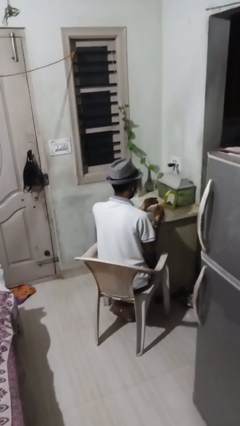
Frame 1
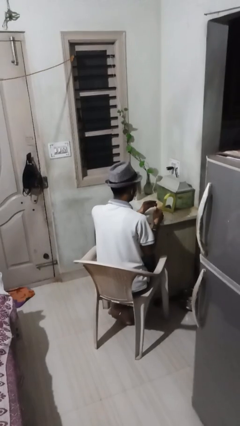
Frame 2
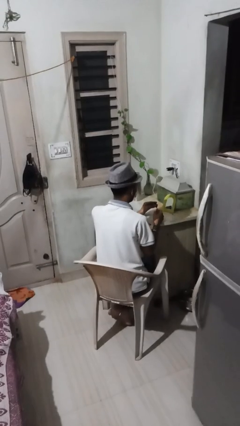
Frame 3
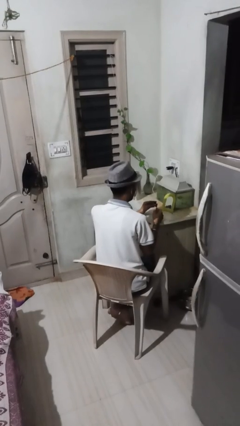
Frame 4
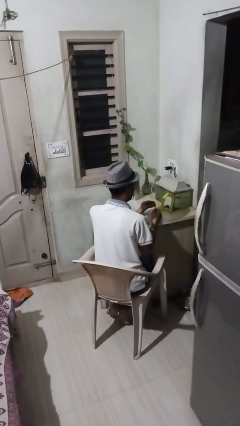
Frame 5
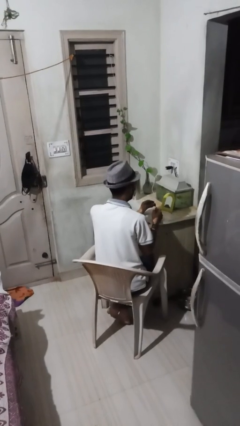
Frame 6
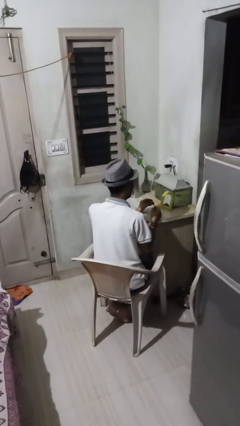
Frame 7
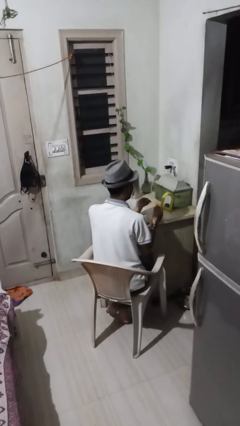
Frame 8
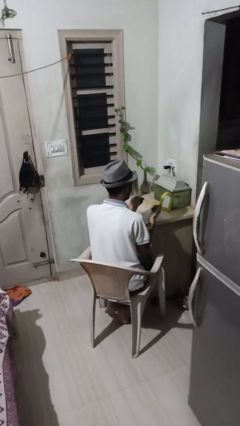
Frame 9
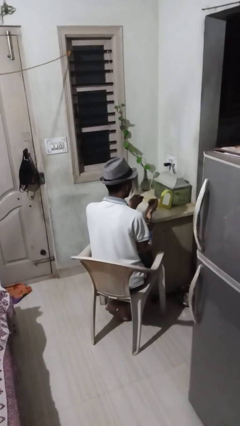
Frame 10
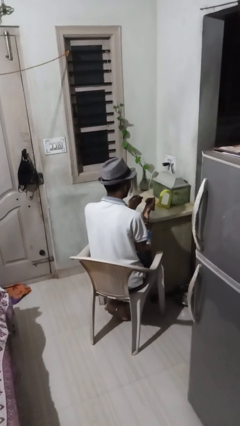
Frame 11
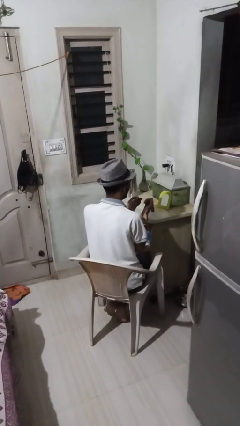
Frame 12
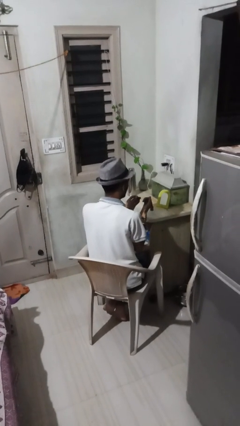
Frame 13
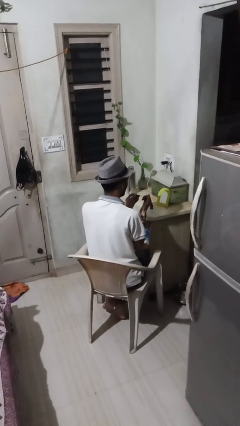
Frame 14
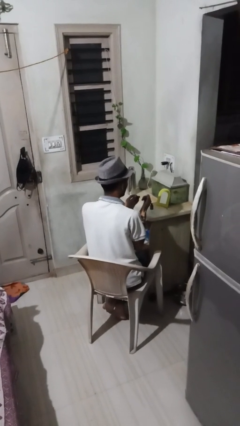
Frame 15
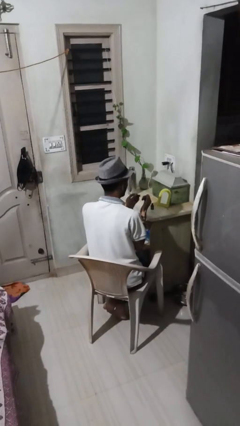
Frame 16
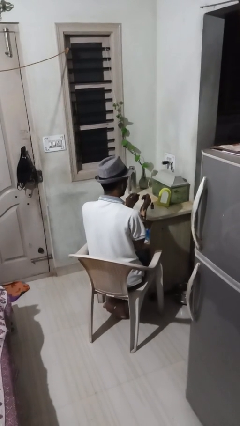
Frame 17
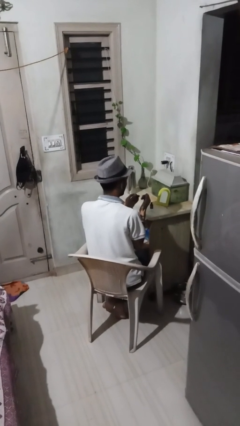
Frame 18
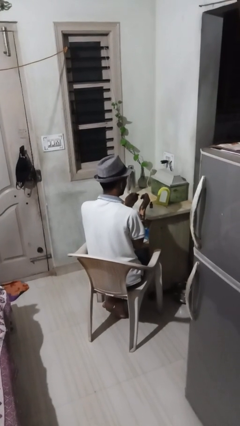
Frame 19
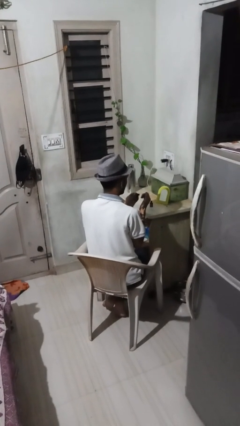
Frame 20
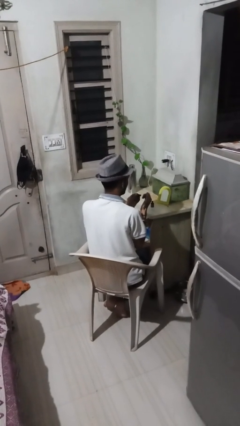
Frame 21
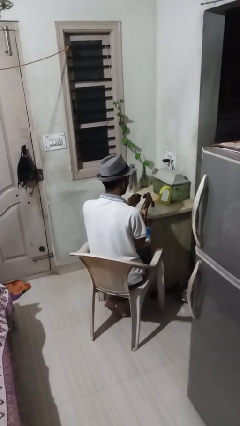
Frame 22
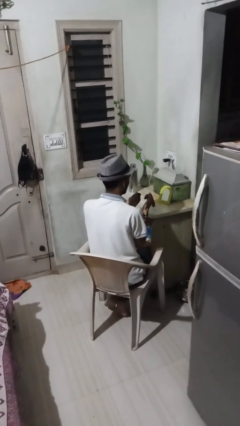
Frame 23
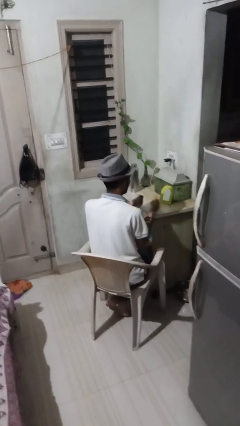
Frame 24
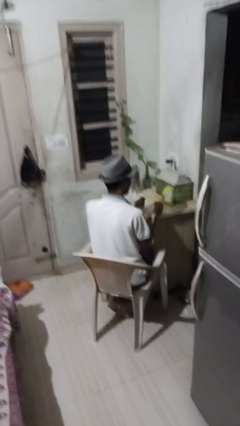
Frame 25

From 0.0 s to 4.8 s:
person paints fingernails

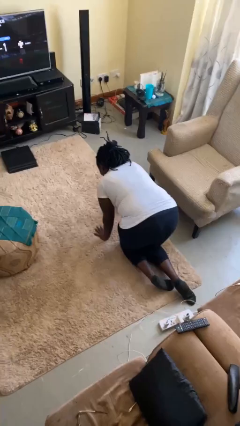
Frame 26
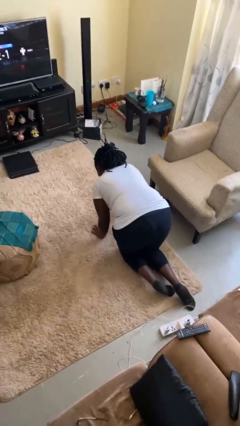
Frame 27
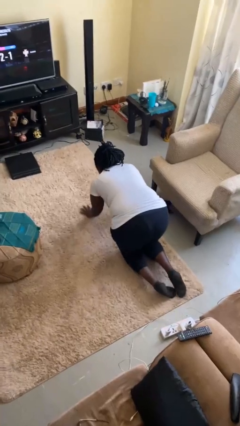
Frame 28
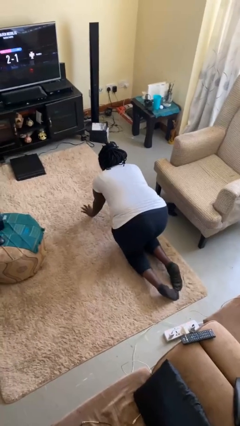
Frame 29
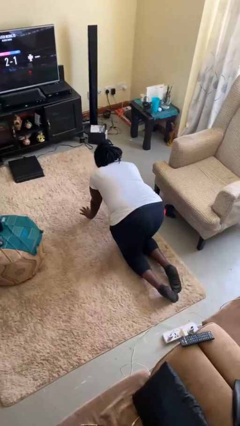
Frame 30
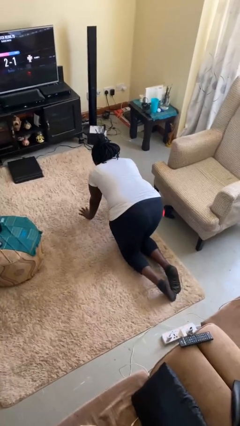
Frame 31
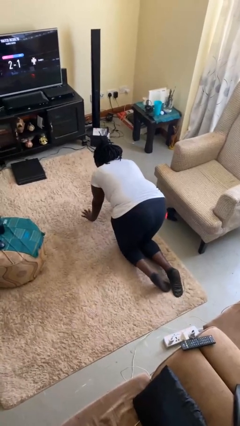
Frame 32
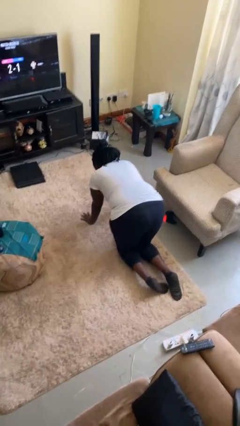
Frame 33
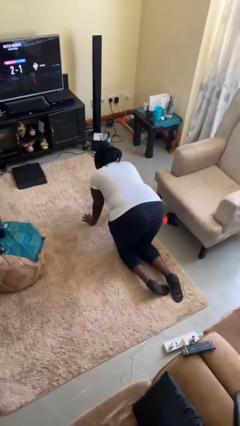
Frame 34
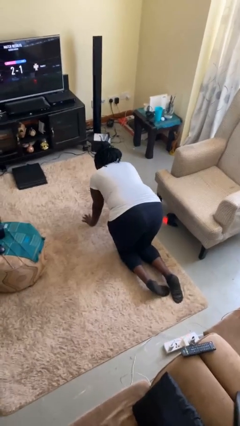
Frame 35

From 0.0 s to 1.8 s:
person crawls

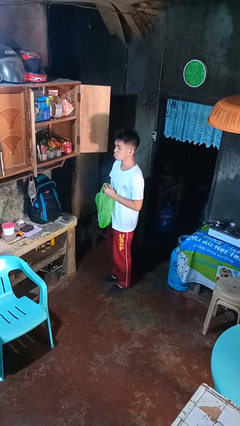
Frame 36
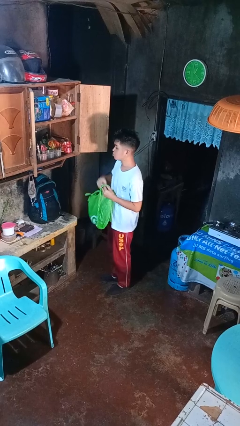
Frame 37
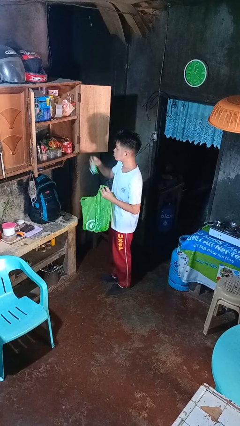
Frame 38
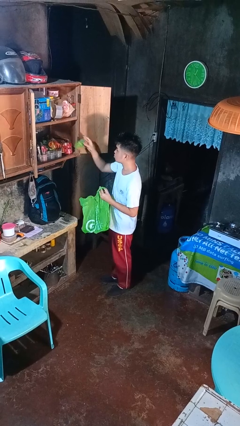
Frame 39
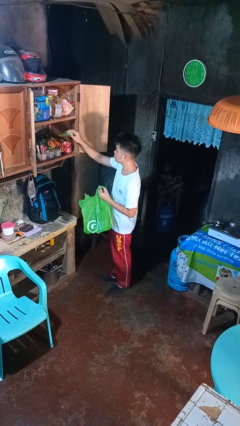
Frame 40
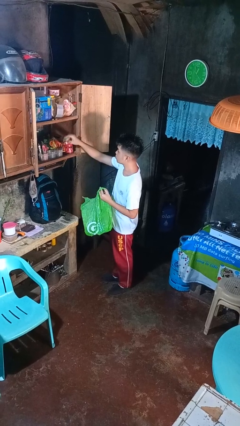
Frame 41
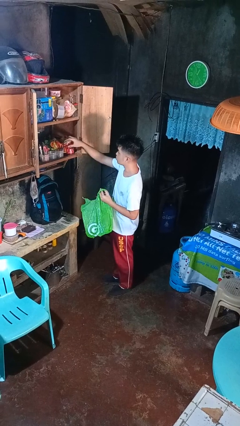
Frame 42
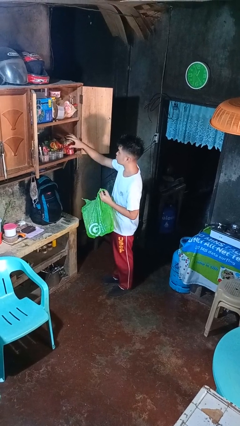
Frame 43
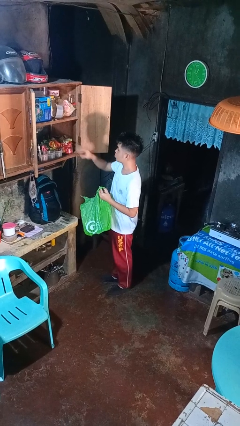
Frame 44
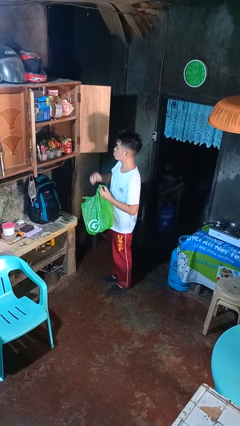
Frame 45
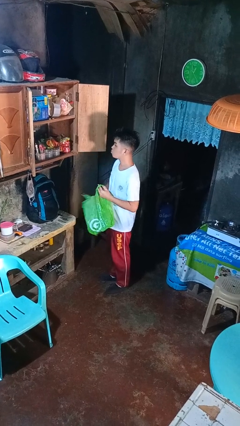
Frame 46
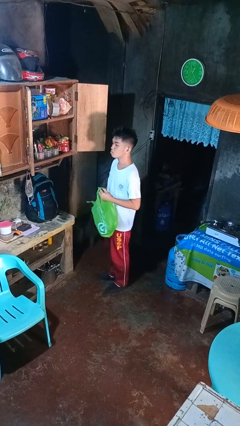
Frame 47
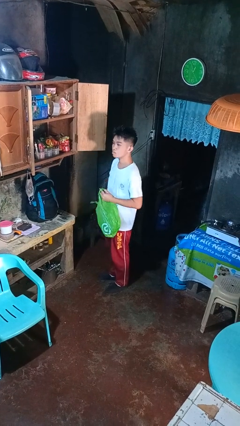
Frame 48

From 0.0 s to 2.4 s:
person loads groceries into cabinet

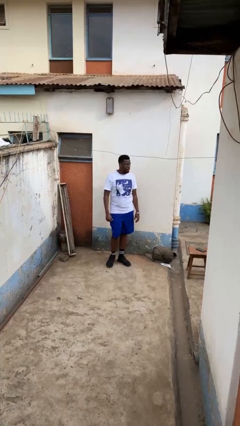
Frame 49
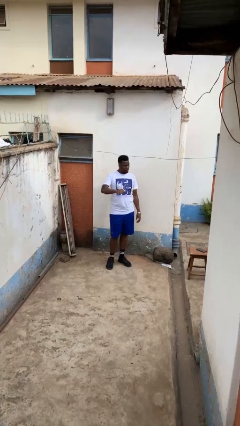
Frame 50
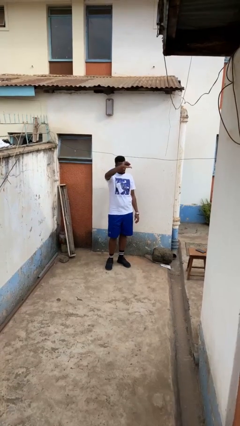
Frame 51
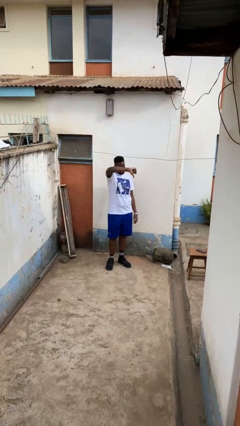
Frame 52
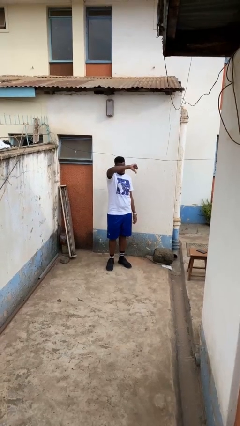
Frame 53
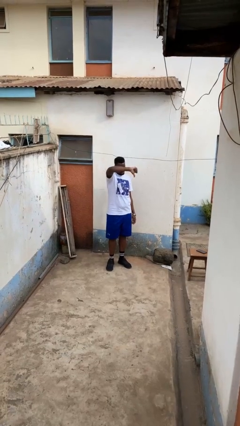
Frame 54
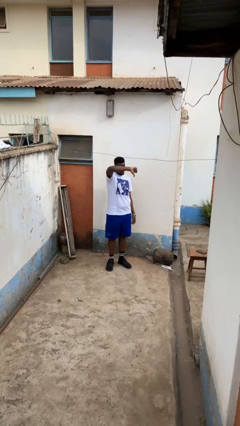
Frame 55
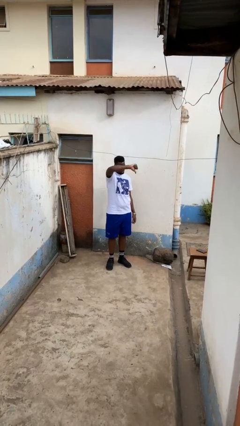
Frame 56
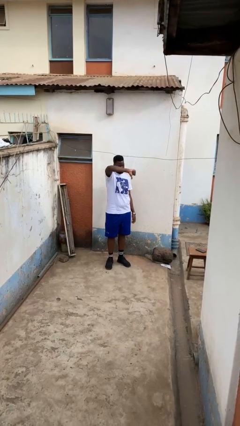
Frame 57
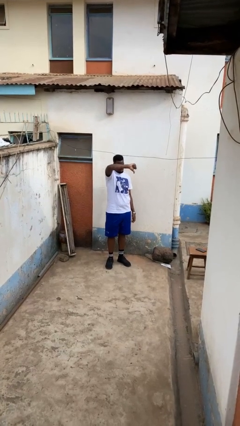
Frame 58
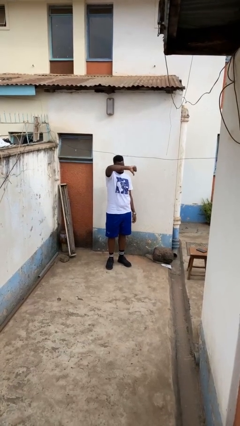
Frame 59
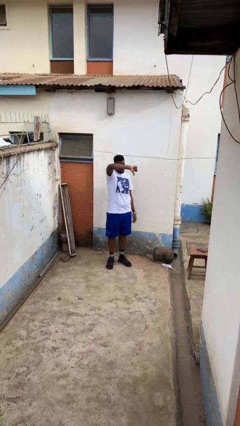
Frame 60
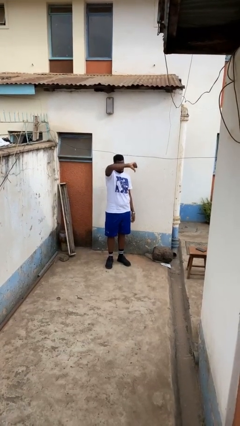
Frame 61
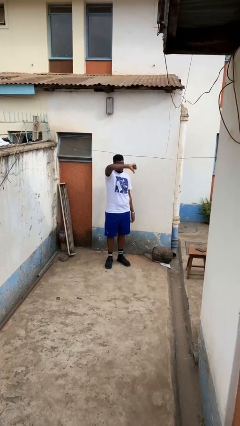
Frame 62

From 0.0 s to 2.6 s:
person gestures thumbs down

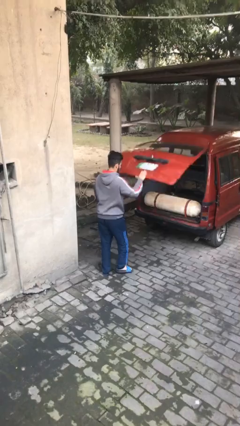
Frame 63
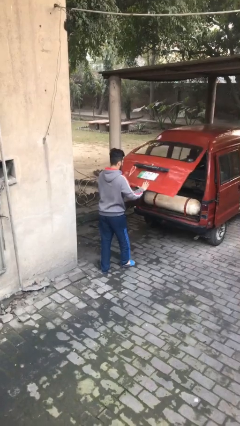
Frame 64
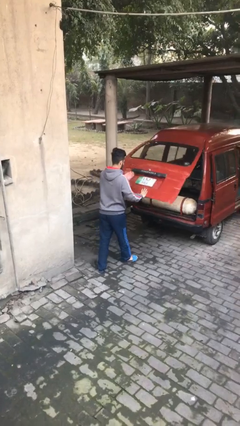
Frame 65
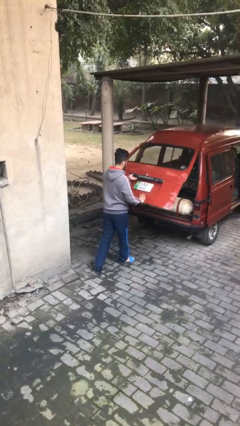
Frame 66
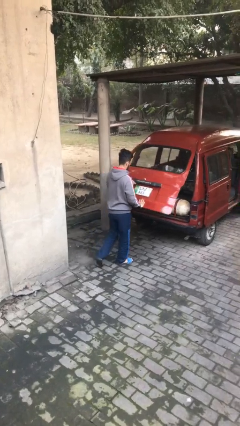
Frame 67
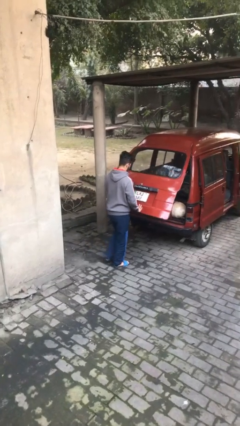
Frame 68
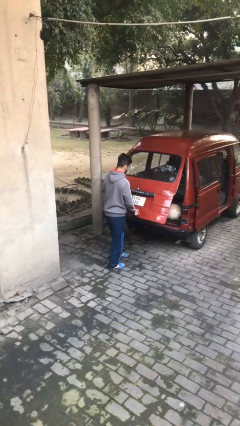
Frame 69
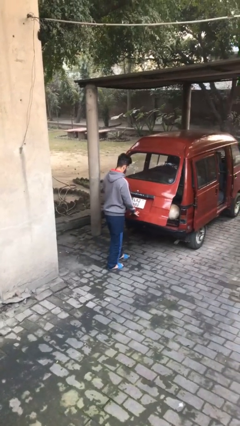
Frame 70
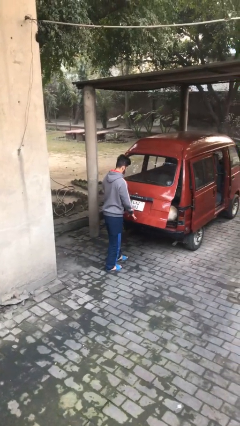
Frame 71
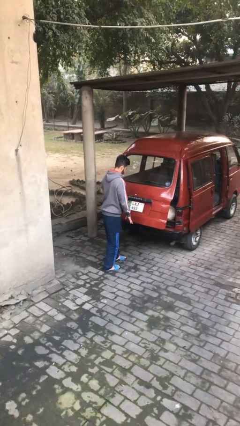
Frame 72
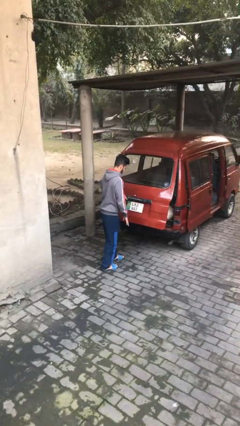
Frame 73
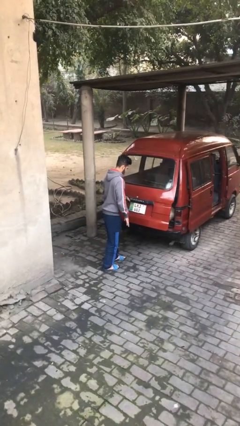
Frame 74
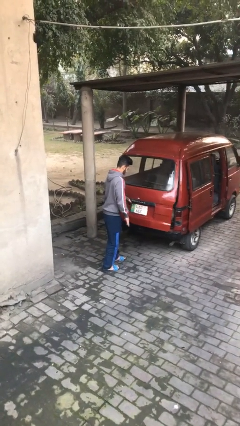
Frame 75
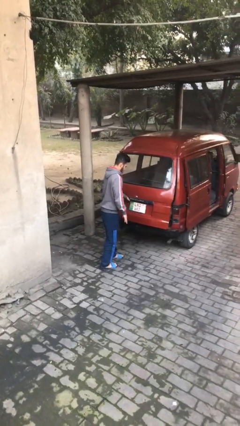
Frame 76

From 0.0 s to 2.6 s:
person closes car trunk

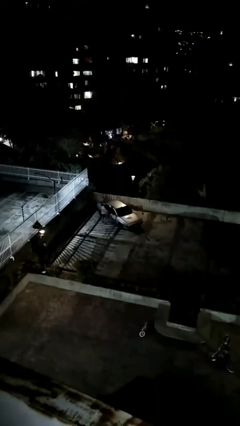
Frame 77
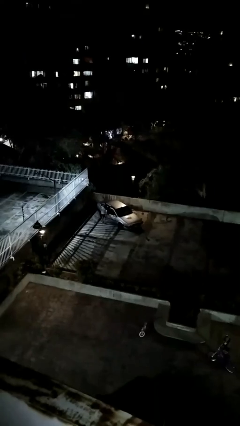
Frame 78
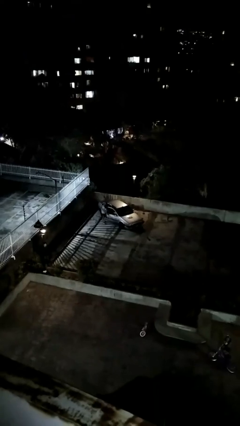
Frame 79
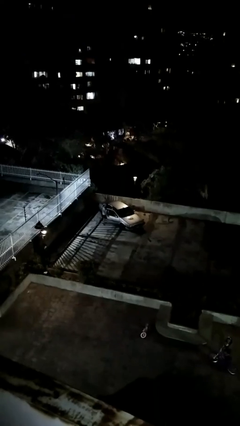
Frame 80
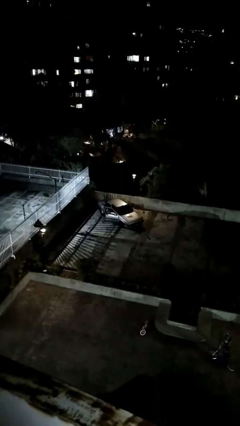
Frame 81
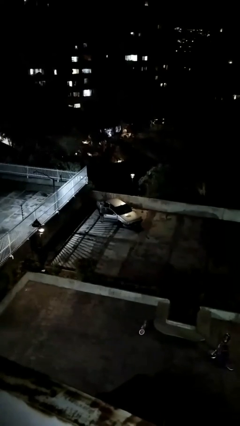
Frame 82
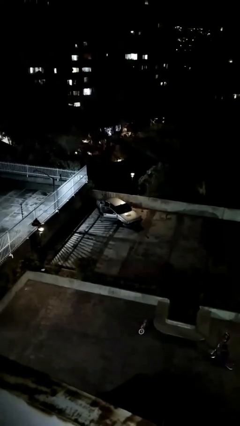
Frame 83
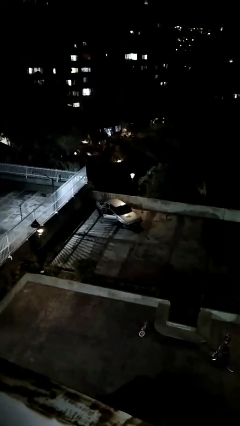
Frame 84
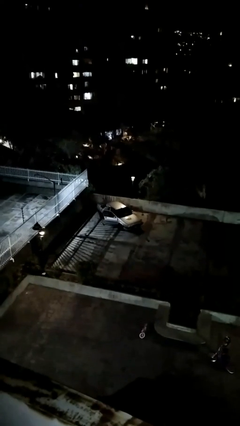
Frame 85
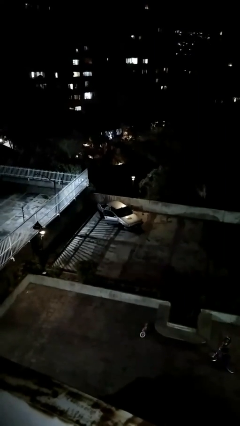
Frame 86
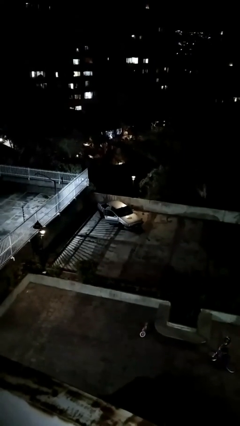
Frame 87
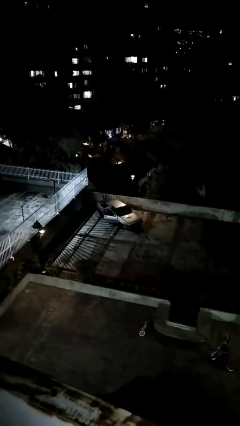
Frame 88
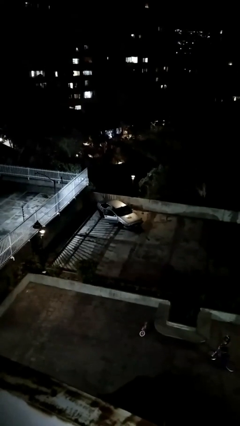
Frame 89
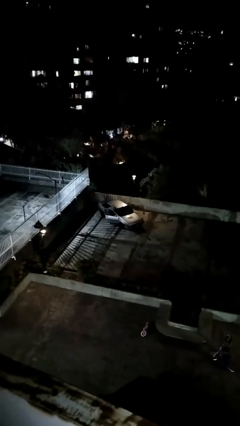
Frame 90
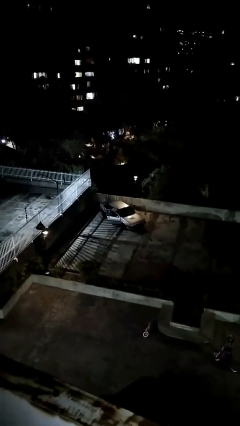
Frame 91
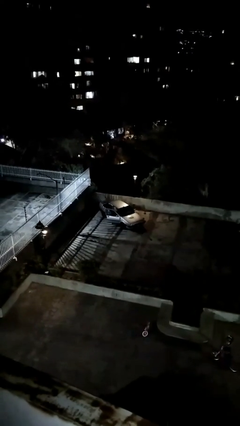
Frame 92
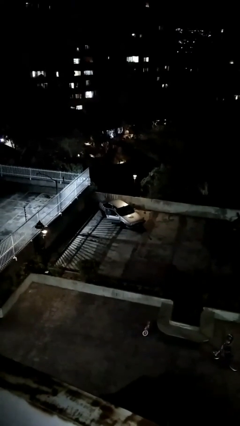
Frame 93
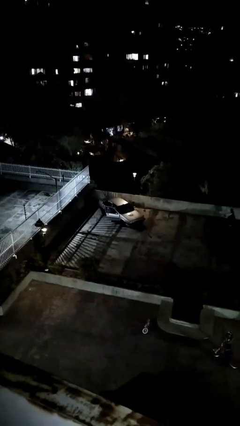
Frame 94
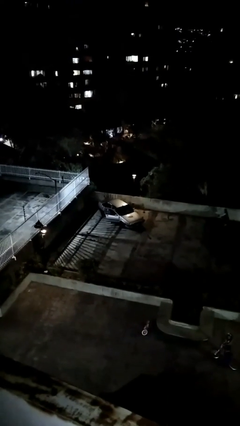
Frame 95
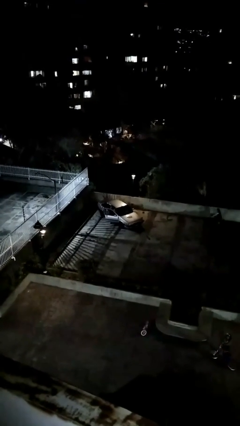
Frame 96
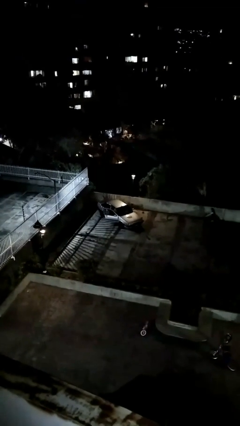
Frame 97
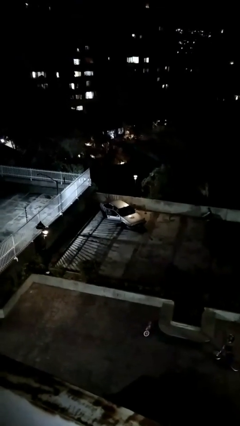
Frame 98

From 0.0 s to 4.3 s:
car picks up person
